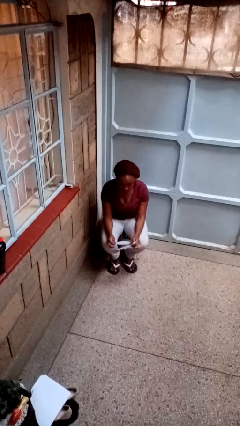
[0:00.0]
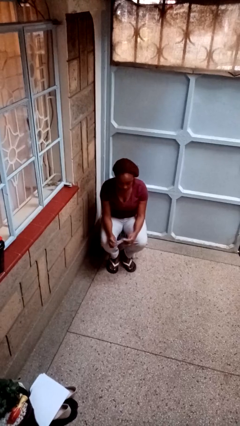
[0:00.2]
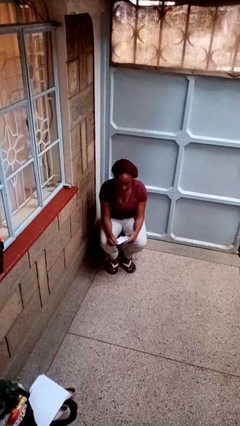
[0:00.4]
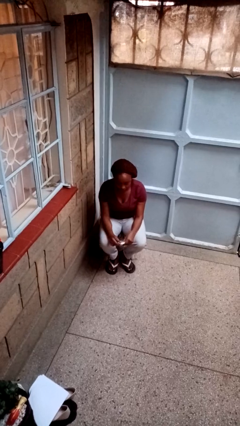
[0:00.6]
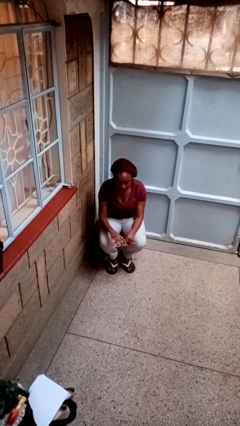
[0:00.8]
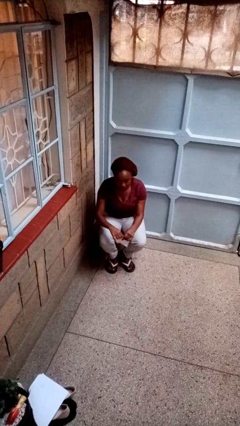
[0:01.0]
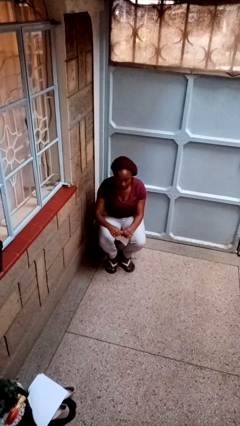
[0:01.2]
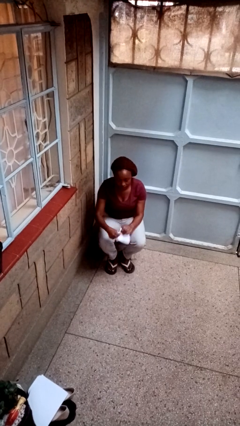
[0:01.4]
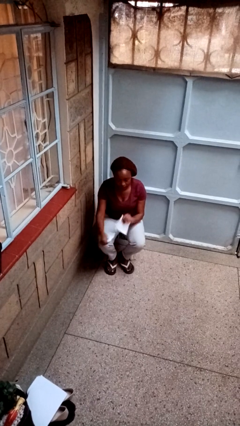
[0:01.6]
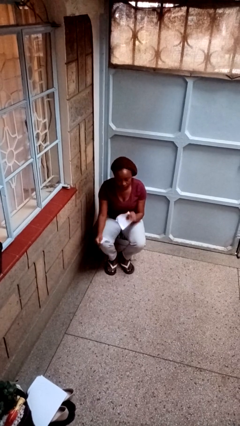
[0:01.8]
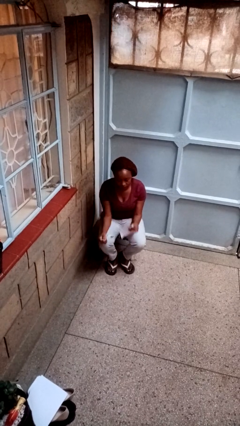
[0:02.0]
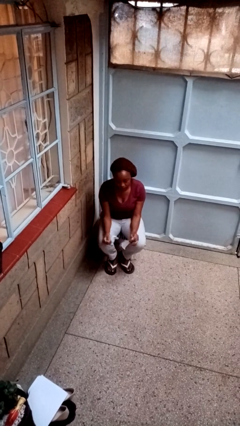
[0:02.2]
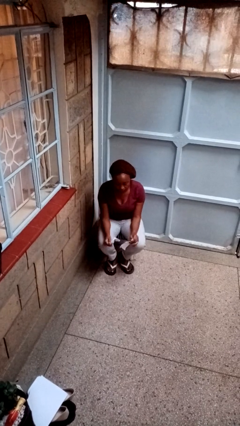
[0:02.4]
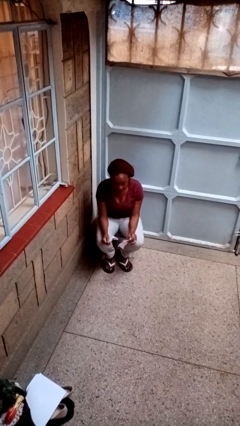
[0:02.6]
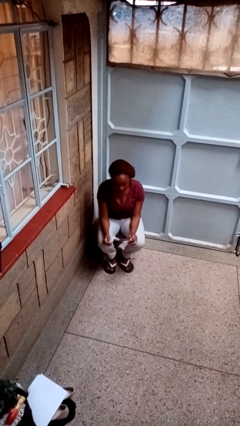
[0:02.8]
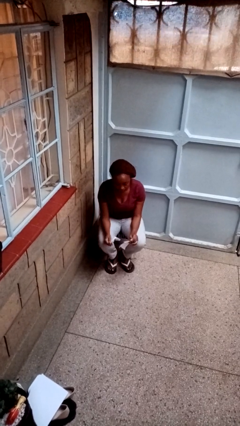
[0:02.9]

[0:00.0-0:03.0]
person tears paper

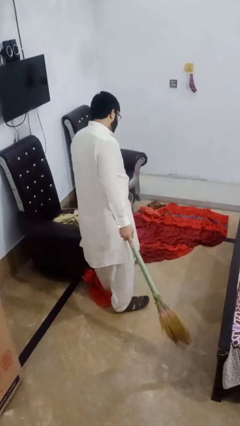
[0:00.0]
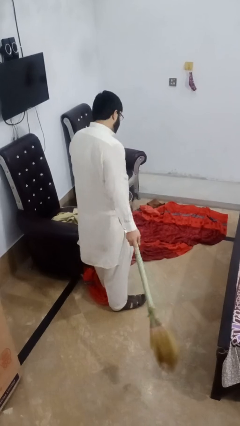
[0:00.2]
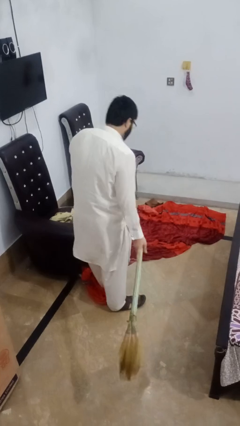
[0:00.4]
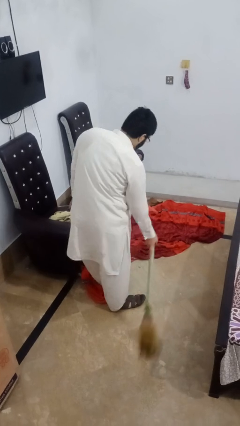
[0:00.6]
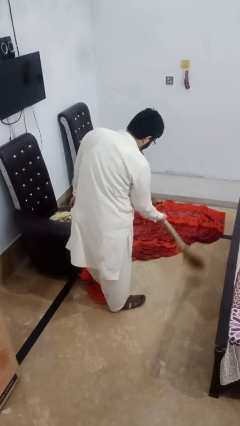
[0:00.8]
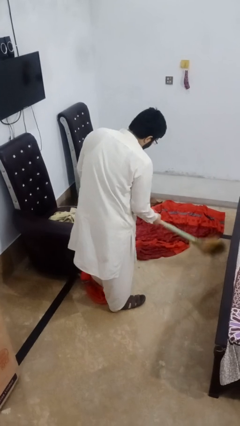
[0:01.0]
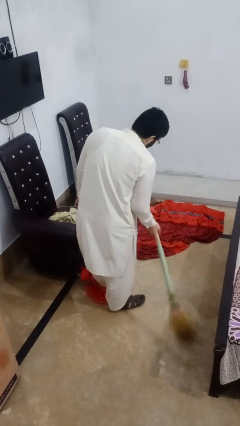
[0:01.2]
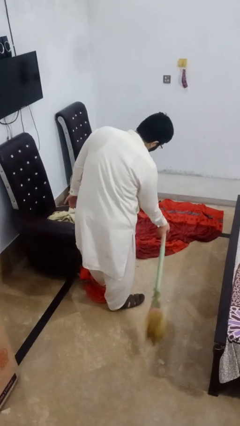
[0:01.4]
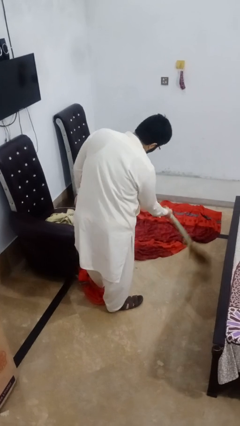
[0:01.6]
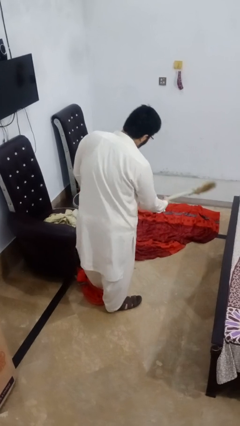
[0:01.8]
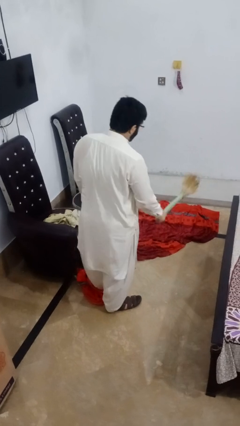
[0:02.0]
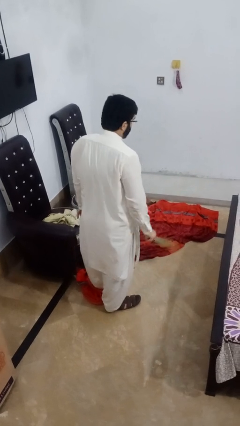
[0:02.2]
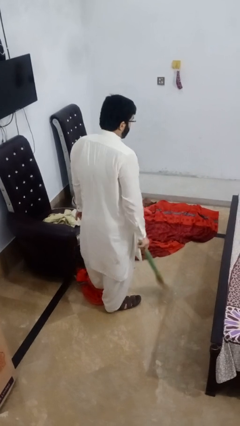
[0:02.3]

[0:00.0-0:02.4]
person sweeps floor

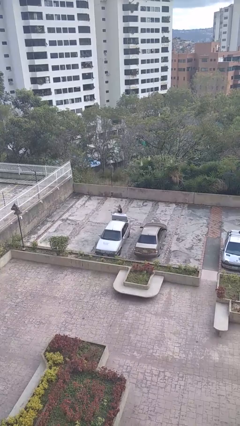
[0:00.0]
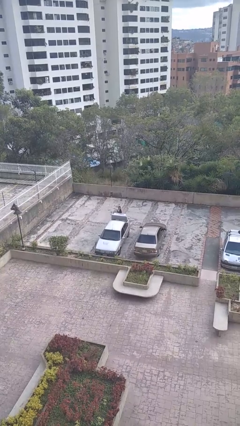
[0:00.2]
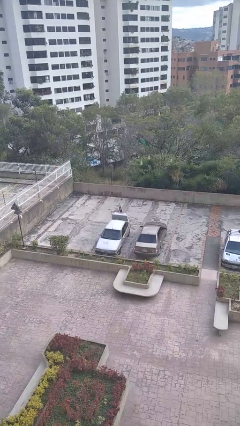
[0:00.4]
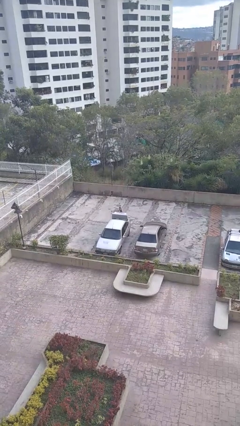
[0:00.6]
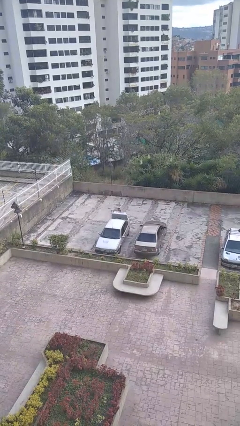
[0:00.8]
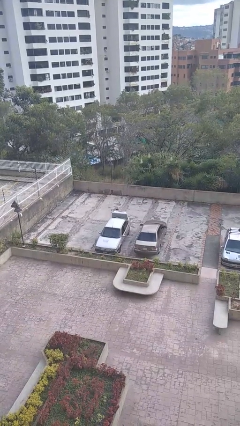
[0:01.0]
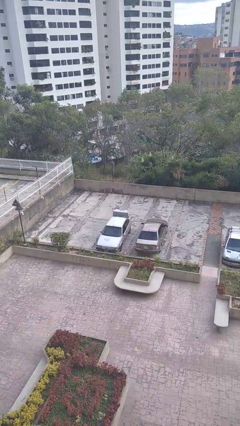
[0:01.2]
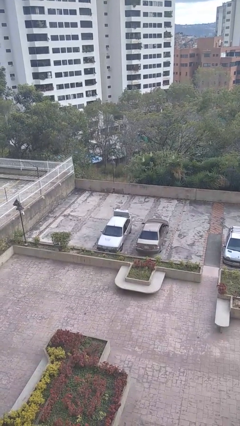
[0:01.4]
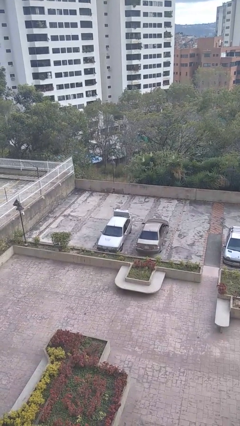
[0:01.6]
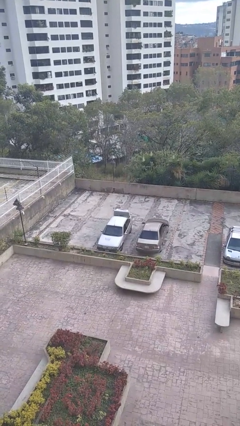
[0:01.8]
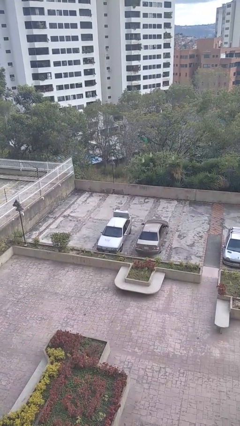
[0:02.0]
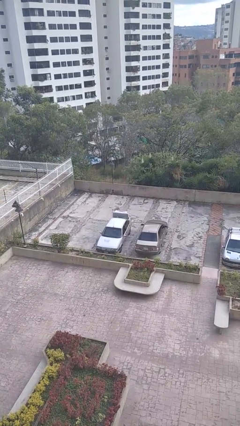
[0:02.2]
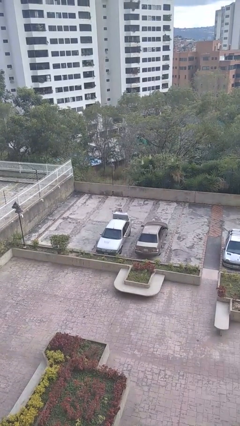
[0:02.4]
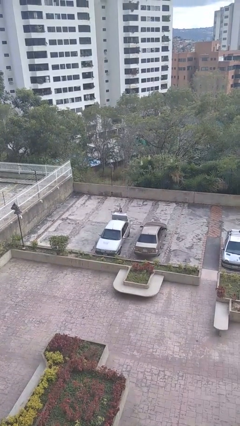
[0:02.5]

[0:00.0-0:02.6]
person unloads car

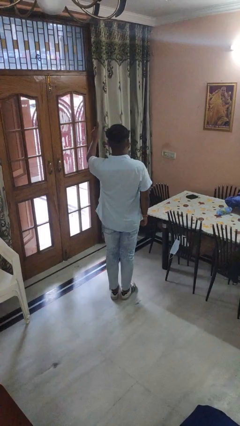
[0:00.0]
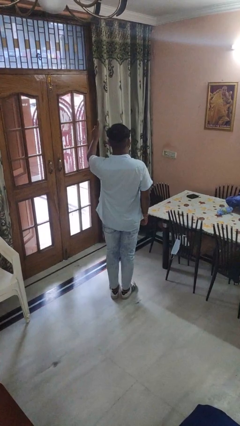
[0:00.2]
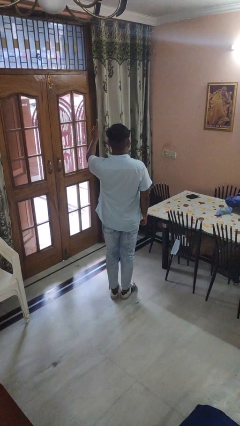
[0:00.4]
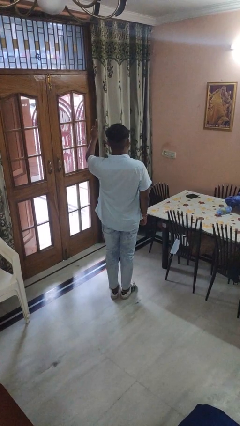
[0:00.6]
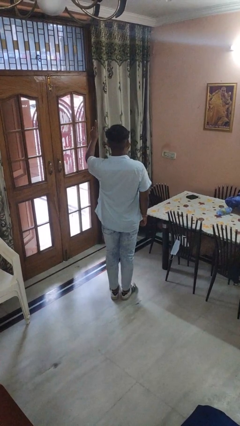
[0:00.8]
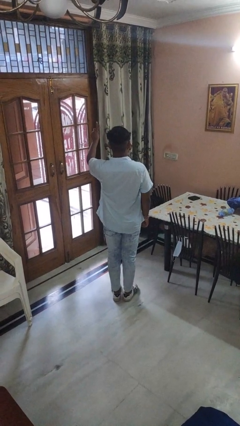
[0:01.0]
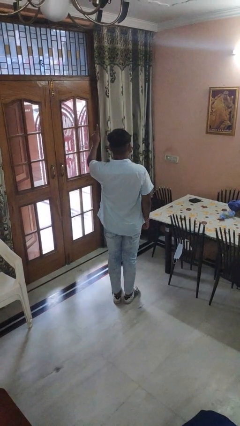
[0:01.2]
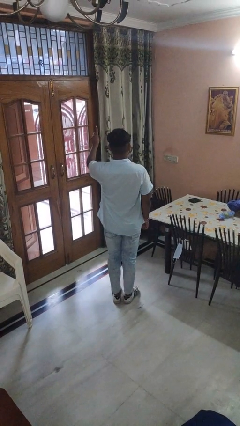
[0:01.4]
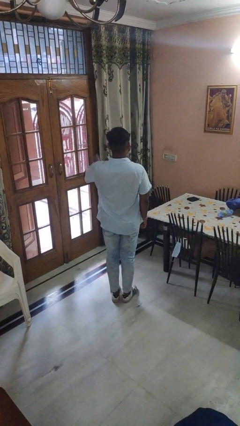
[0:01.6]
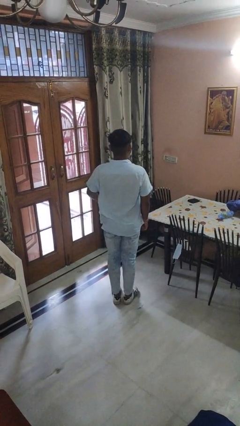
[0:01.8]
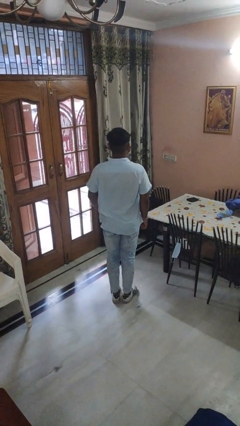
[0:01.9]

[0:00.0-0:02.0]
person gestures number one

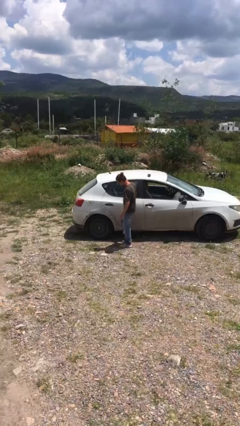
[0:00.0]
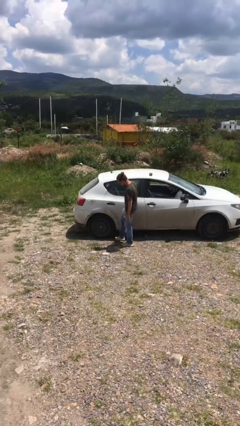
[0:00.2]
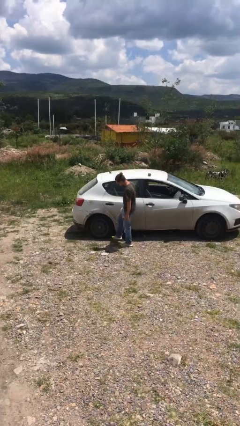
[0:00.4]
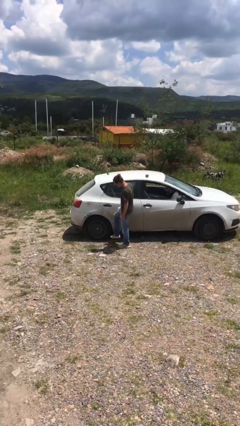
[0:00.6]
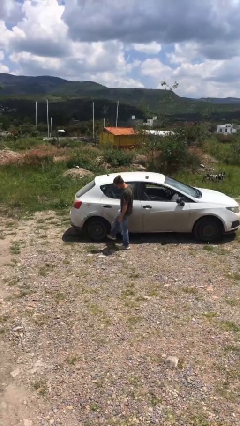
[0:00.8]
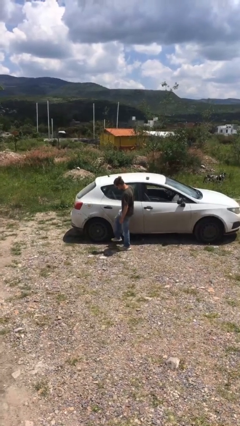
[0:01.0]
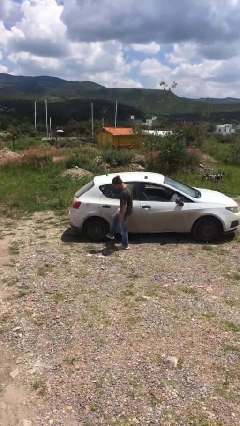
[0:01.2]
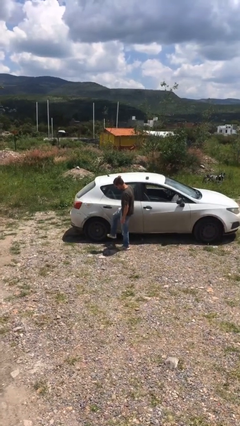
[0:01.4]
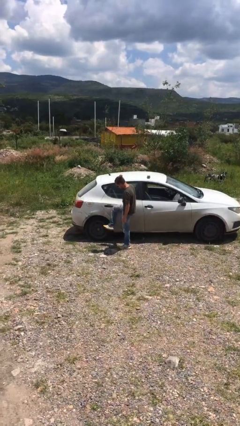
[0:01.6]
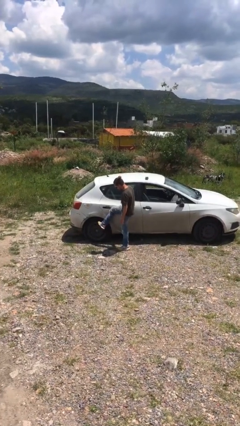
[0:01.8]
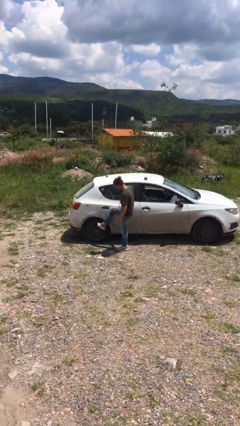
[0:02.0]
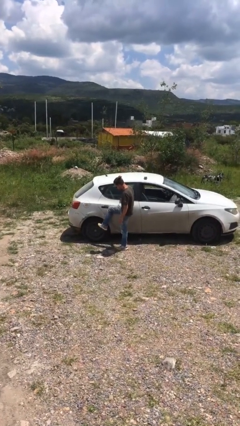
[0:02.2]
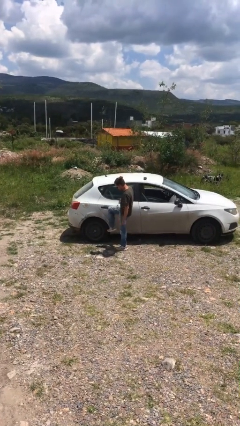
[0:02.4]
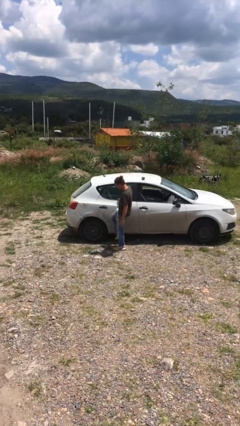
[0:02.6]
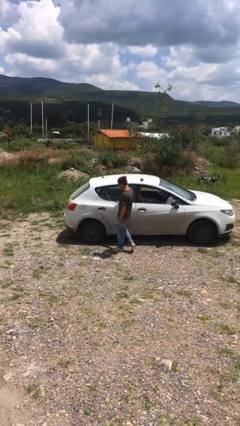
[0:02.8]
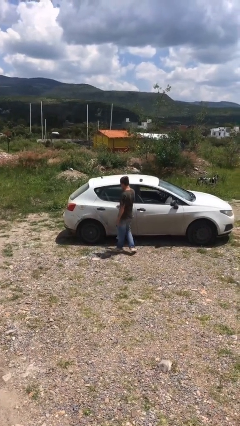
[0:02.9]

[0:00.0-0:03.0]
person kicks car tires

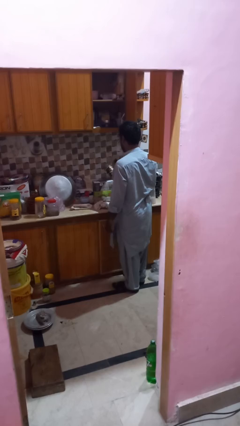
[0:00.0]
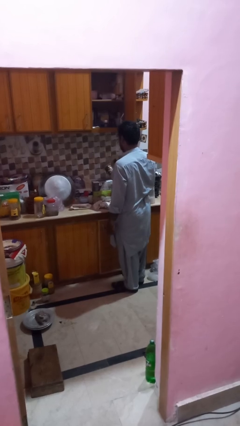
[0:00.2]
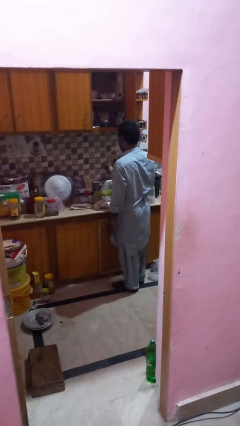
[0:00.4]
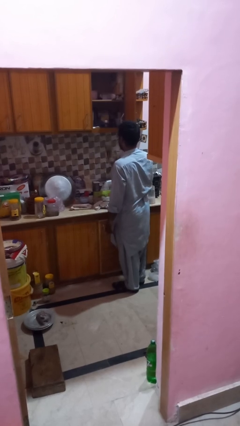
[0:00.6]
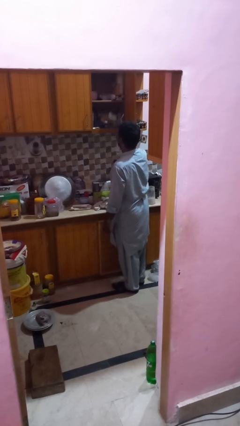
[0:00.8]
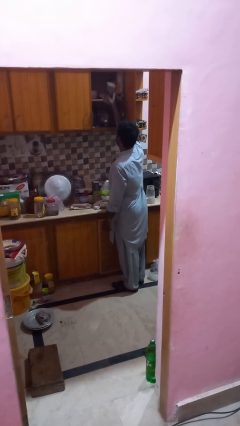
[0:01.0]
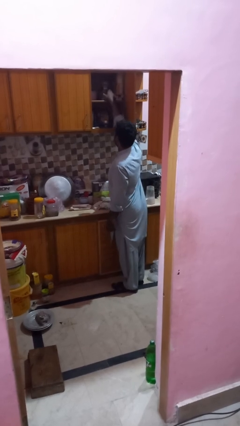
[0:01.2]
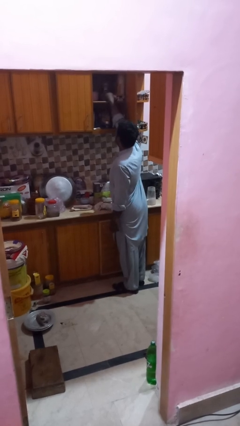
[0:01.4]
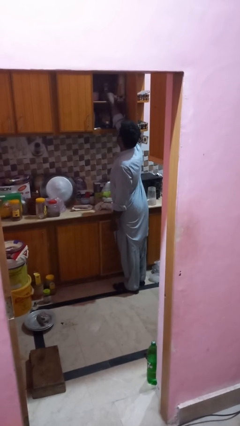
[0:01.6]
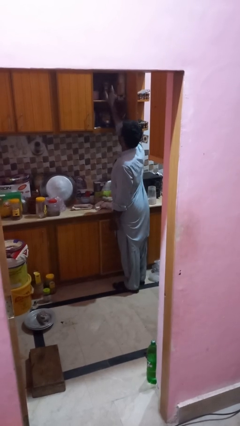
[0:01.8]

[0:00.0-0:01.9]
person puts object in cabinet

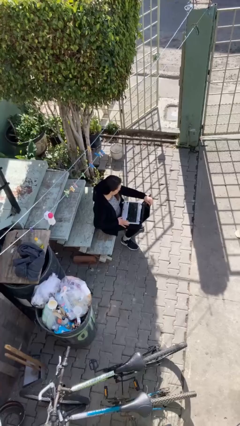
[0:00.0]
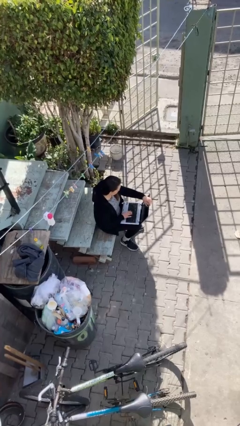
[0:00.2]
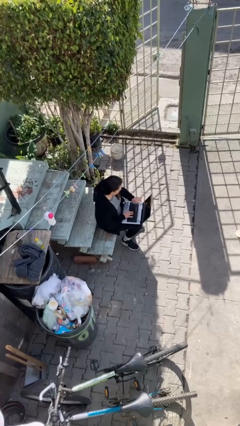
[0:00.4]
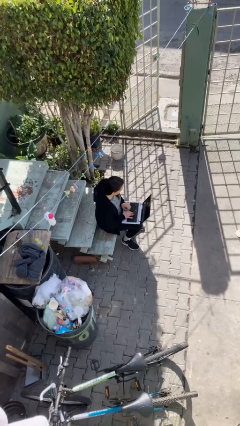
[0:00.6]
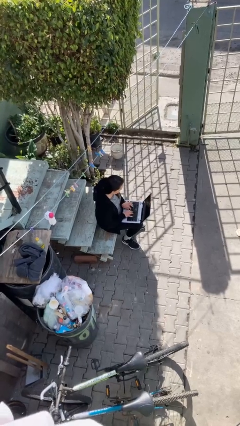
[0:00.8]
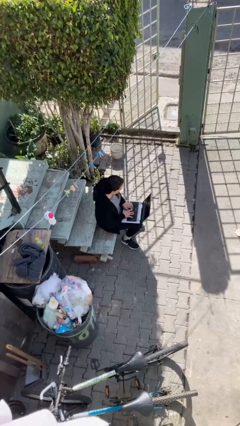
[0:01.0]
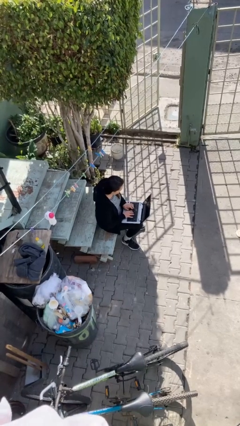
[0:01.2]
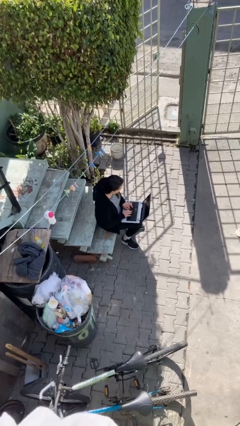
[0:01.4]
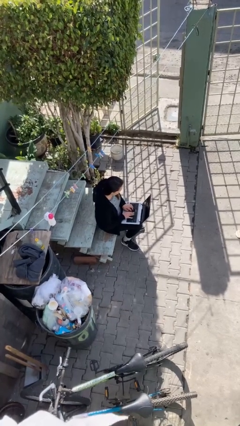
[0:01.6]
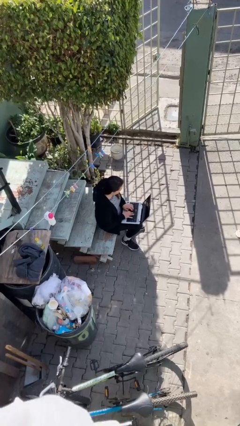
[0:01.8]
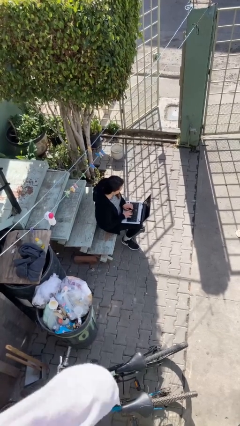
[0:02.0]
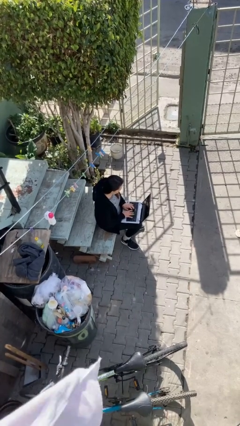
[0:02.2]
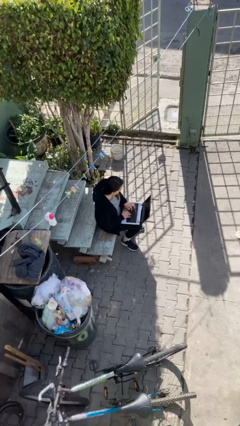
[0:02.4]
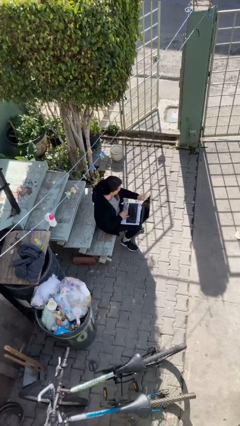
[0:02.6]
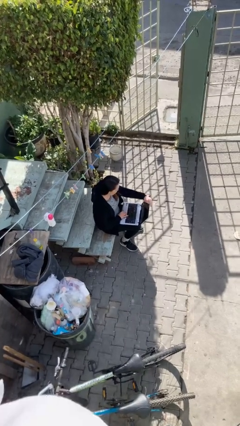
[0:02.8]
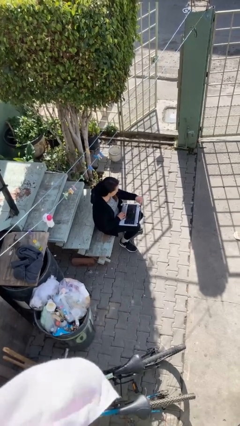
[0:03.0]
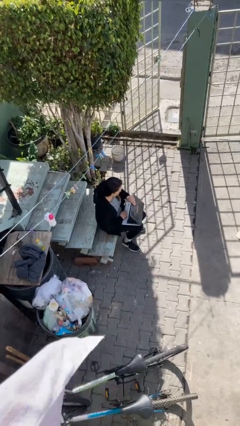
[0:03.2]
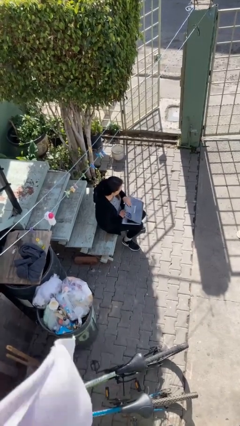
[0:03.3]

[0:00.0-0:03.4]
person interacts with laptop
